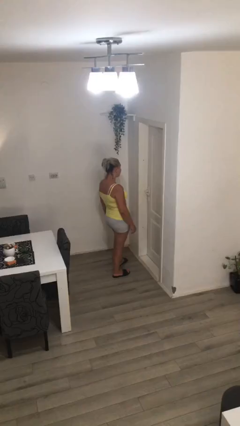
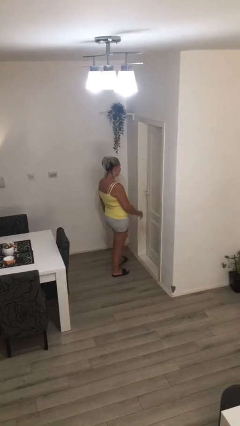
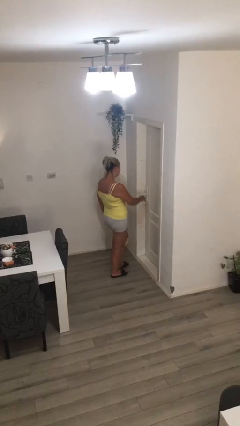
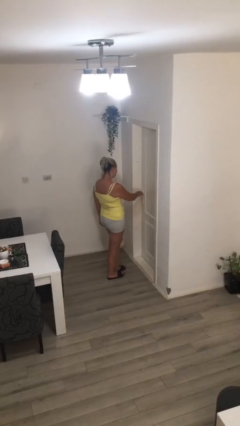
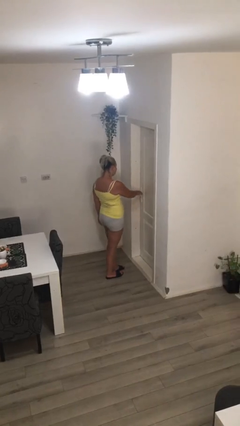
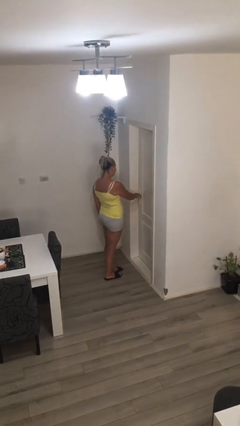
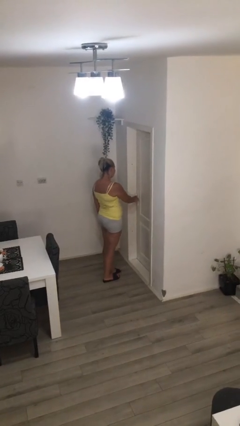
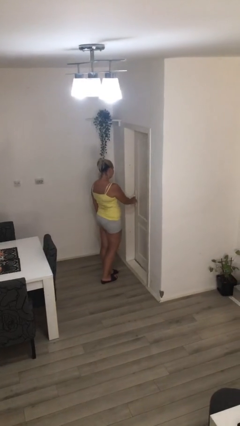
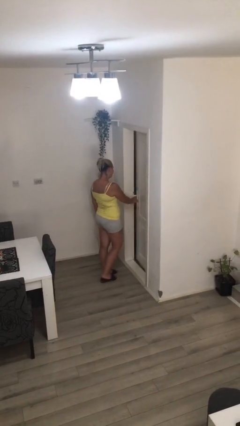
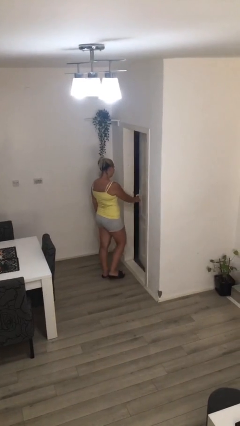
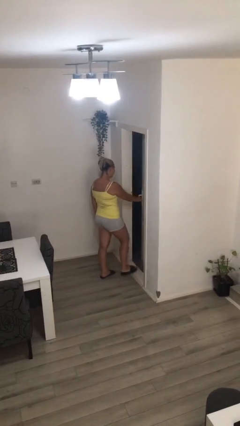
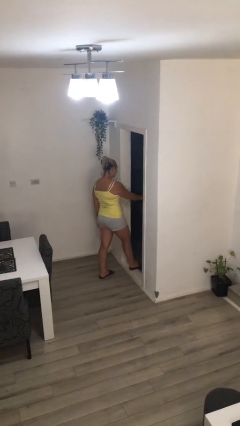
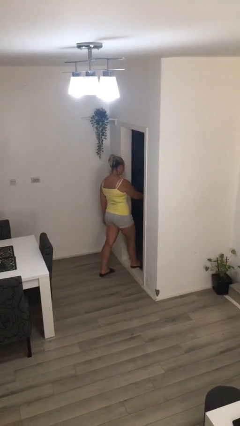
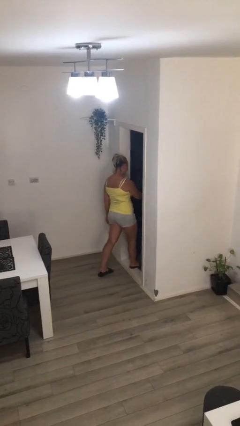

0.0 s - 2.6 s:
person opens facility door

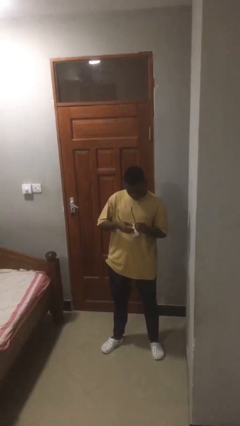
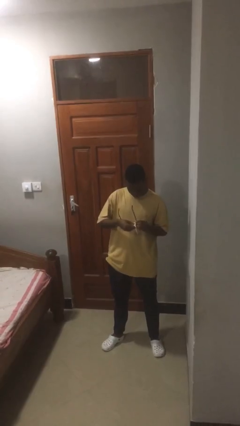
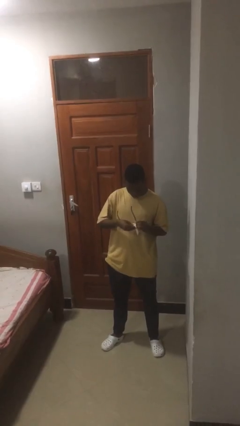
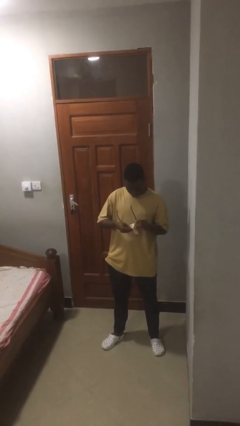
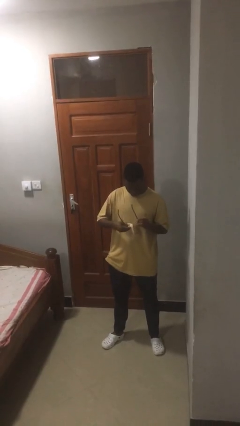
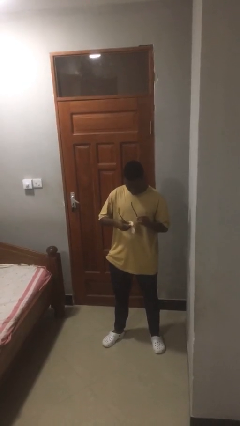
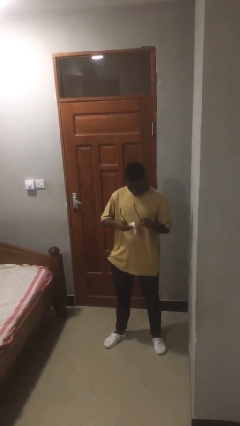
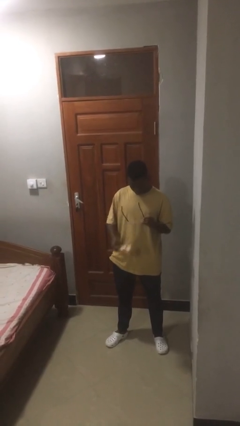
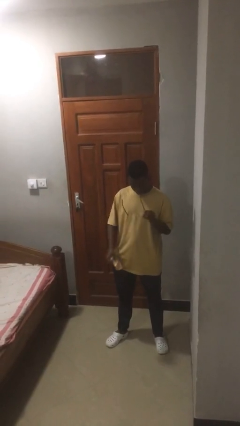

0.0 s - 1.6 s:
person cleans eyeglasses

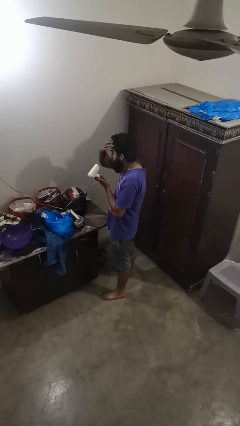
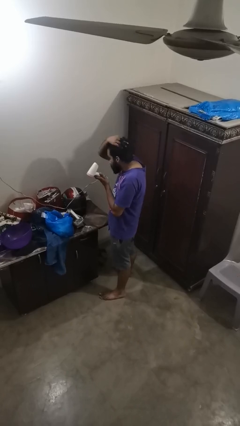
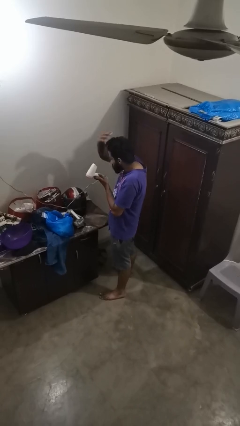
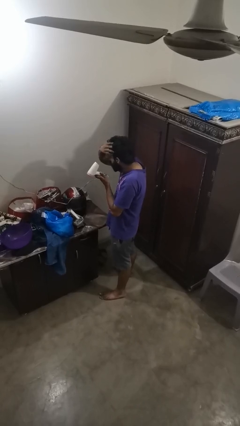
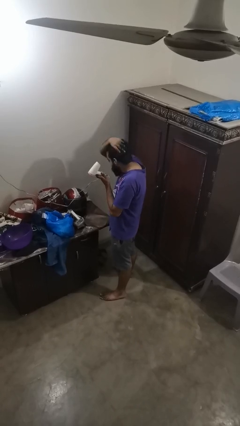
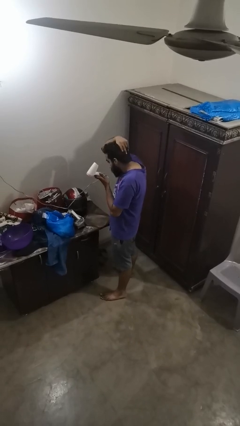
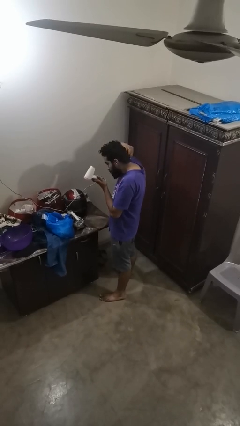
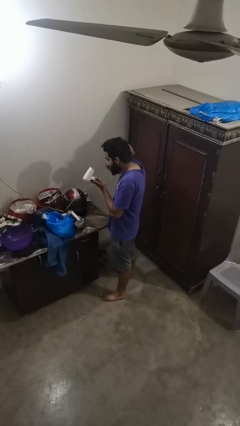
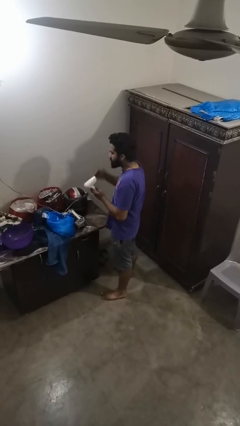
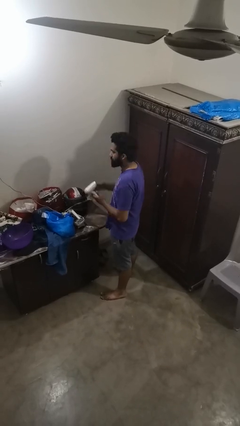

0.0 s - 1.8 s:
person dries hair with hairdryer

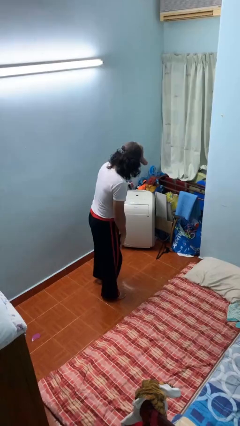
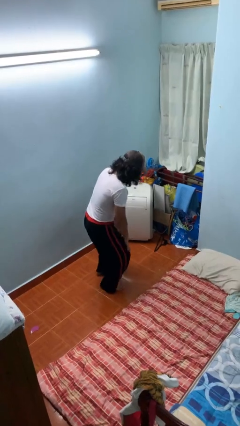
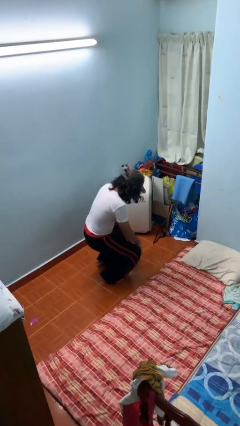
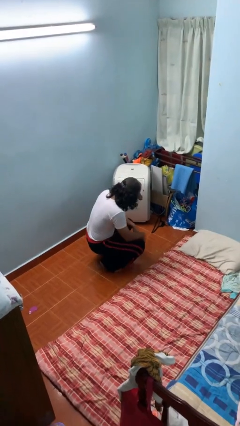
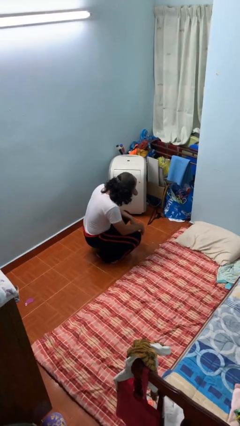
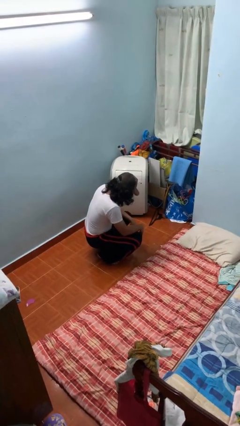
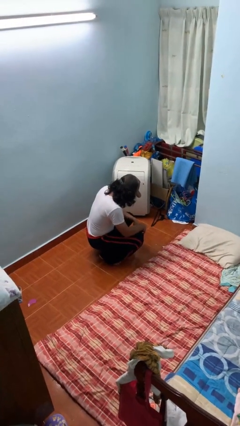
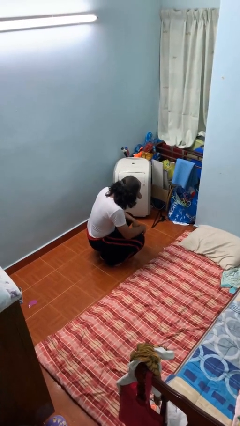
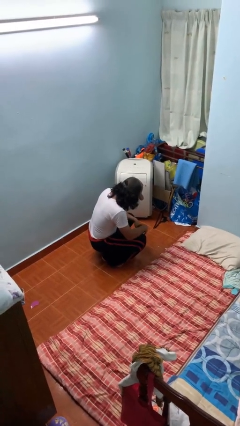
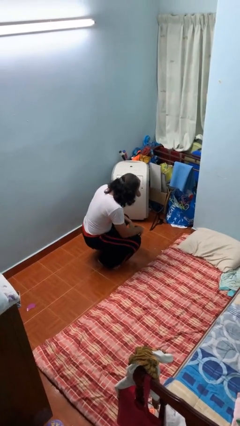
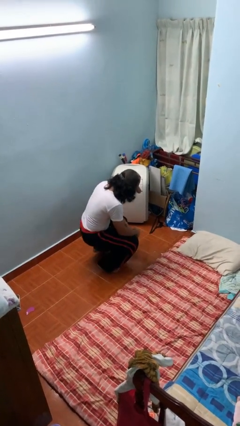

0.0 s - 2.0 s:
person squats

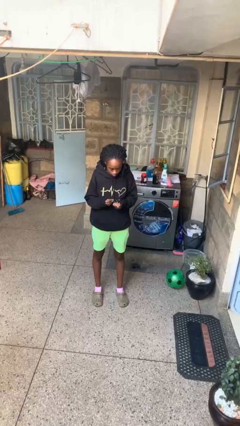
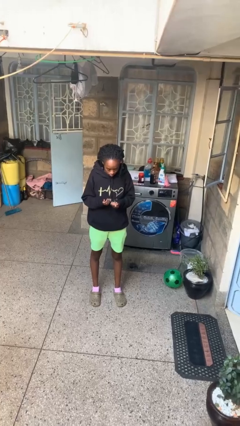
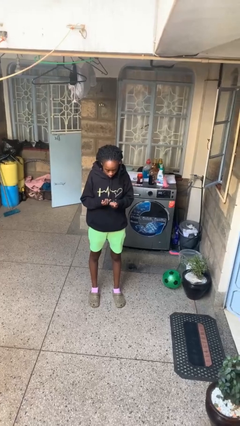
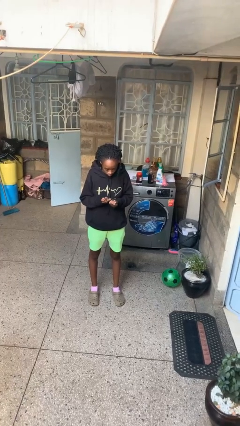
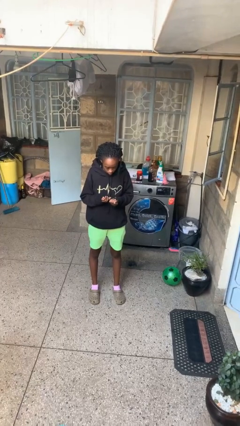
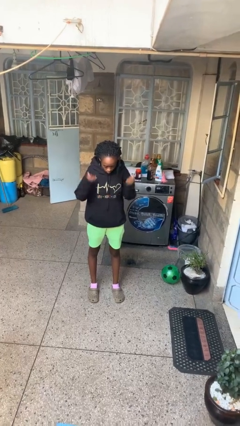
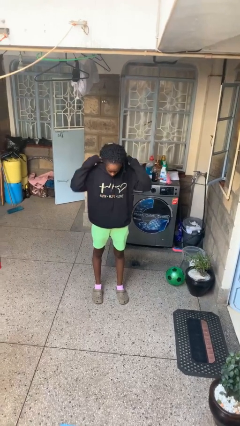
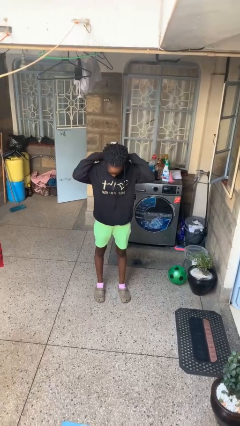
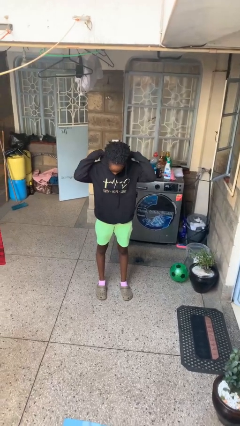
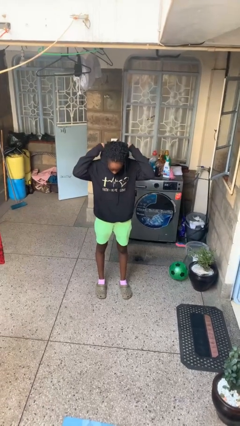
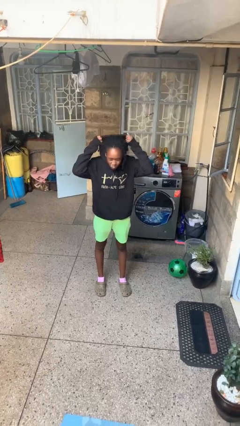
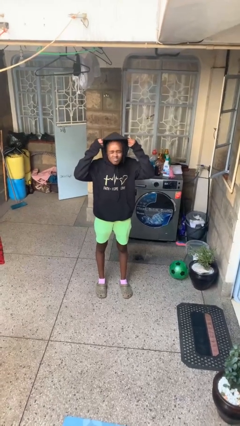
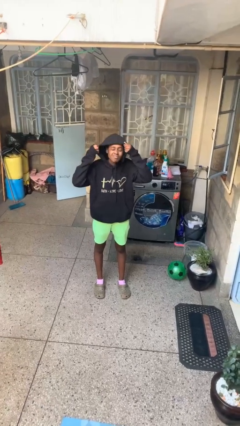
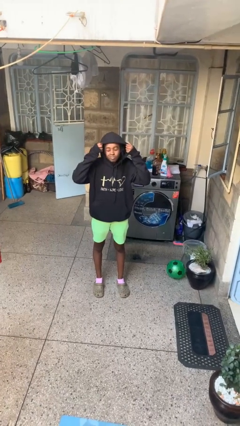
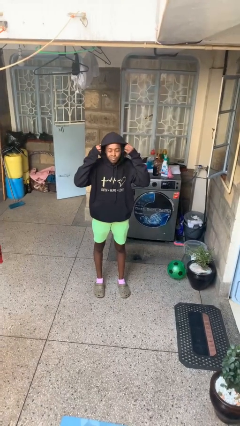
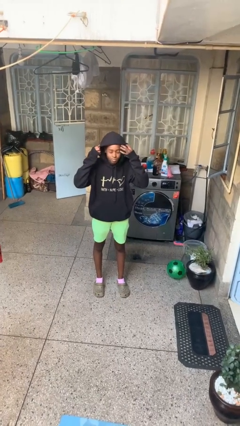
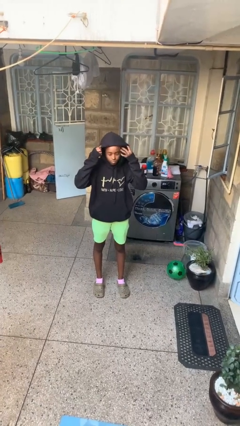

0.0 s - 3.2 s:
person puts on hoodie

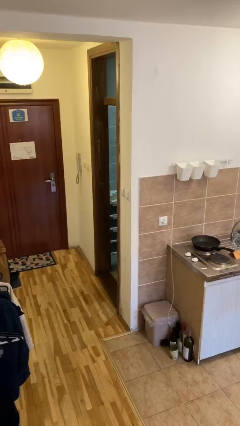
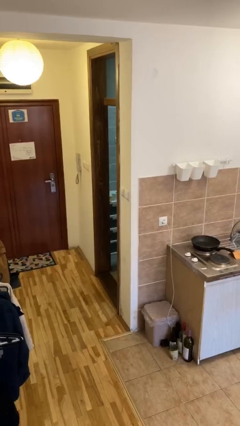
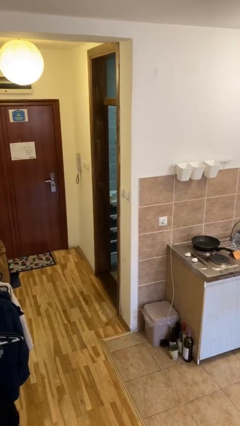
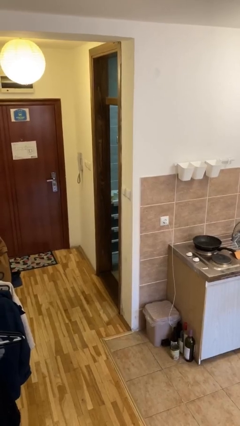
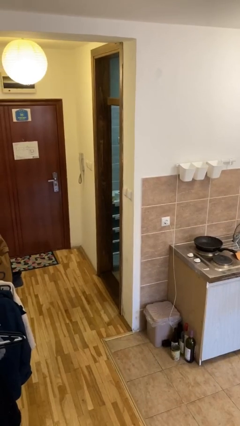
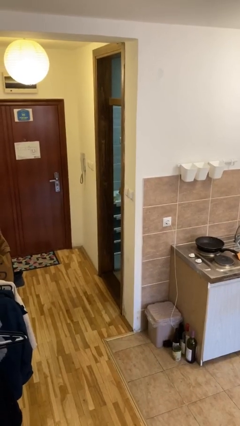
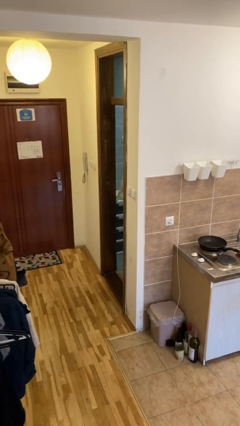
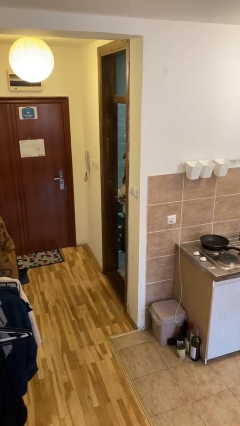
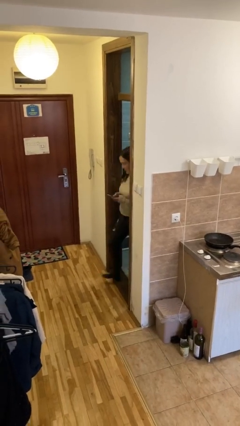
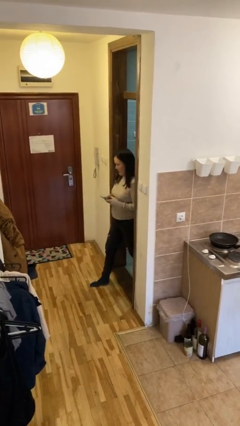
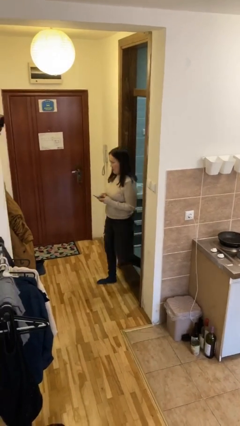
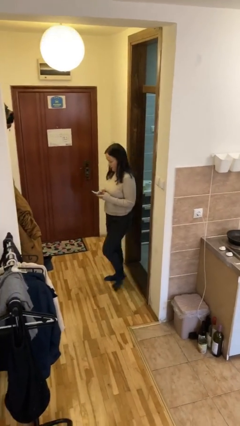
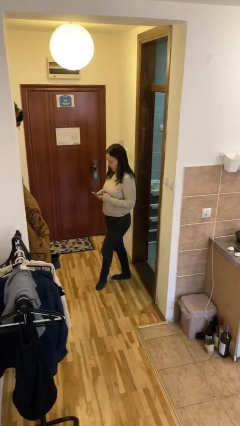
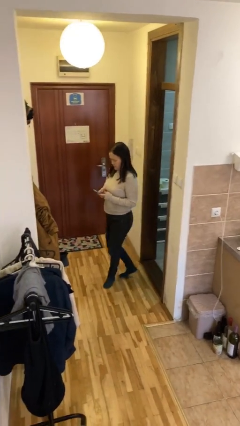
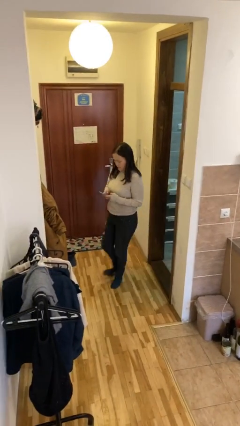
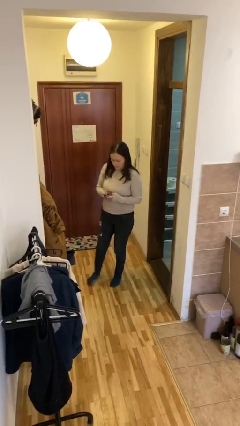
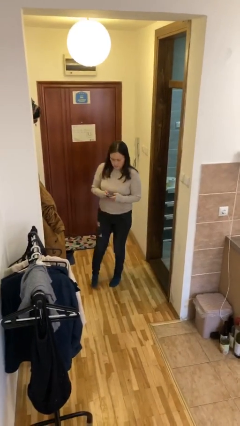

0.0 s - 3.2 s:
person enters scene through structure

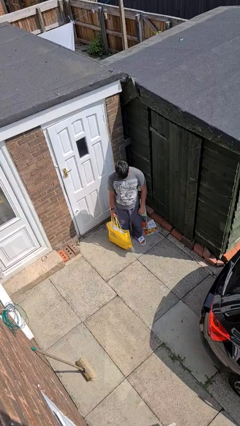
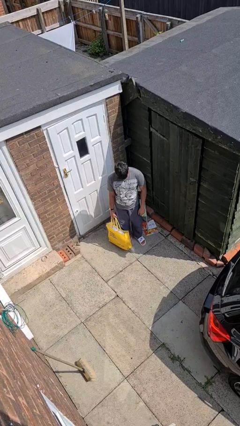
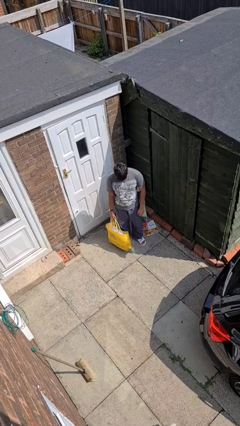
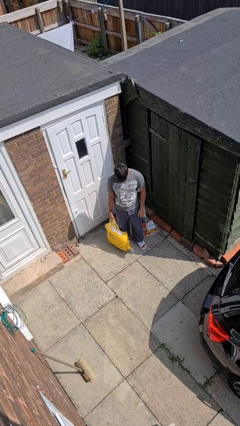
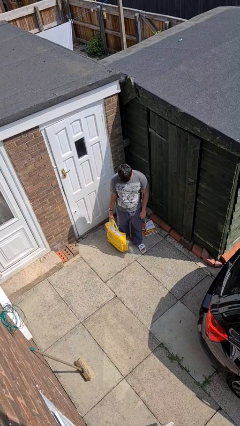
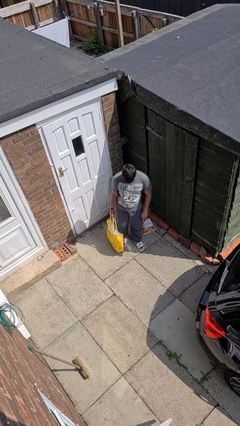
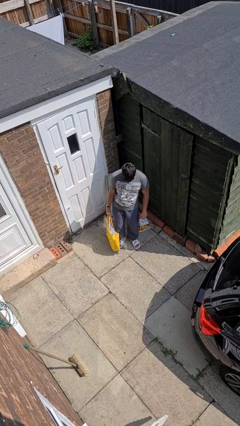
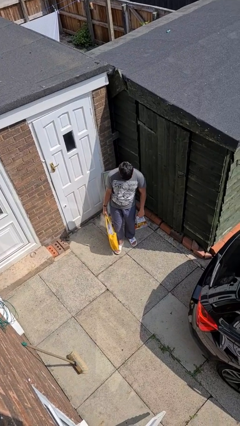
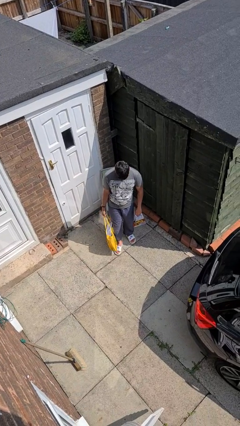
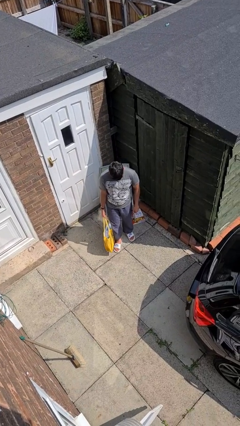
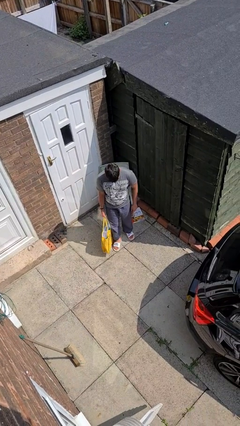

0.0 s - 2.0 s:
person carries groceries

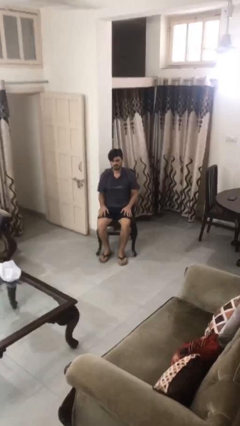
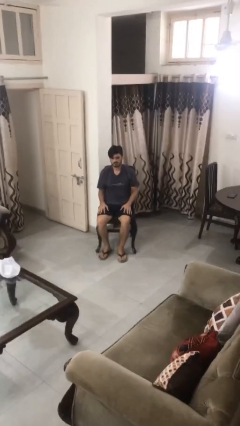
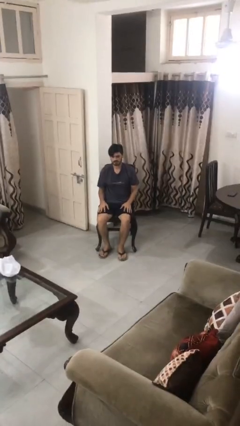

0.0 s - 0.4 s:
person sits down
